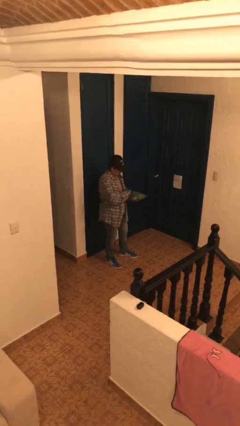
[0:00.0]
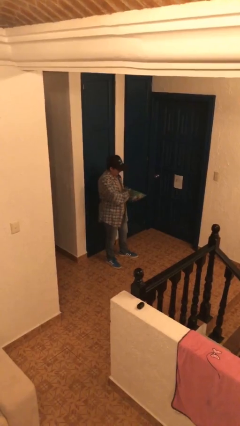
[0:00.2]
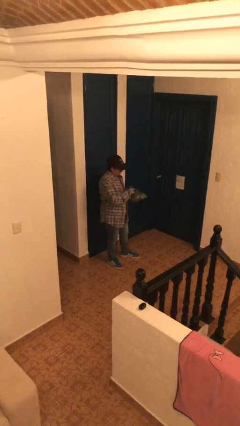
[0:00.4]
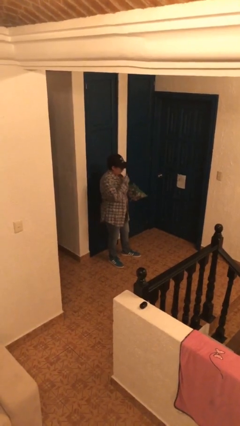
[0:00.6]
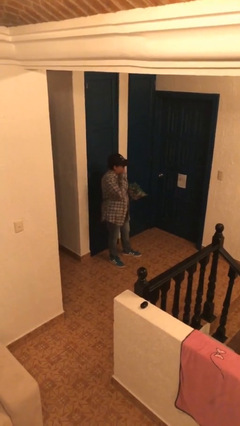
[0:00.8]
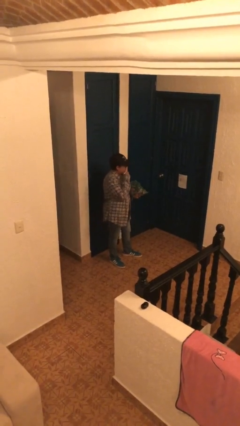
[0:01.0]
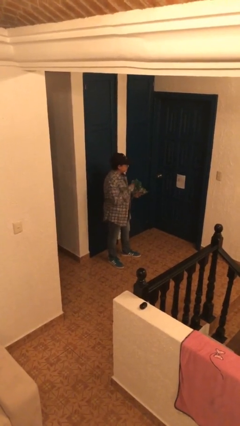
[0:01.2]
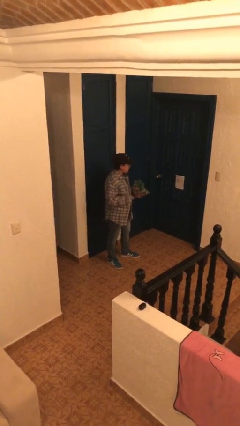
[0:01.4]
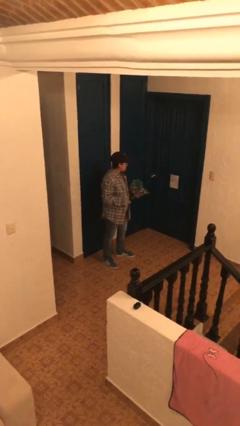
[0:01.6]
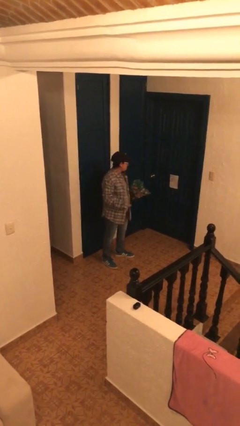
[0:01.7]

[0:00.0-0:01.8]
person eats snack from bag

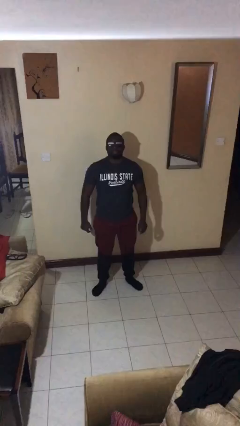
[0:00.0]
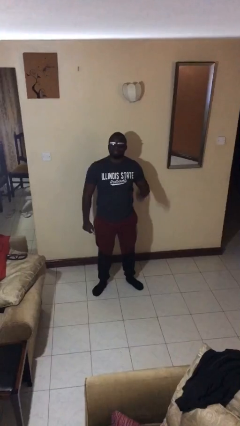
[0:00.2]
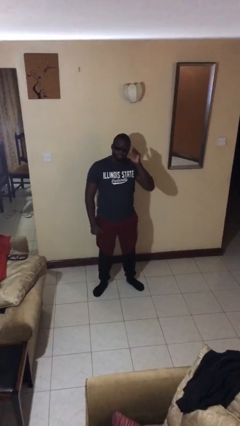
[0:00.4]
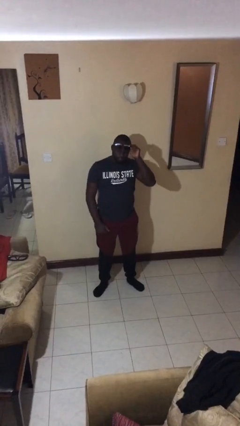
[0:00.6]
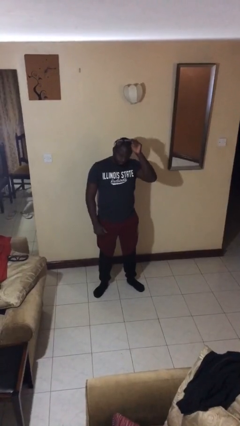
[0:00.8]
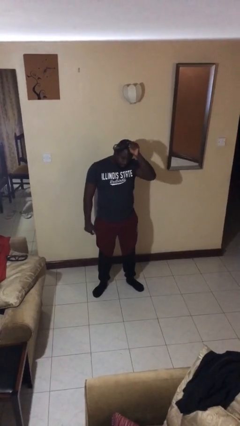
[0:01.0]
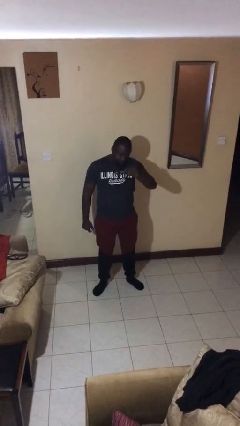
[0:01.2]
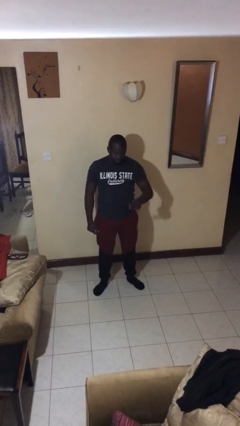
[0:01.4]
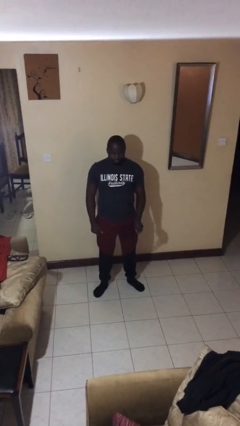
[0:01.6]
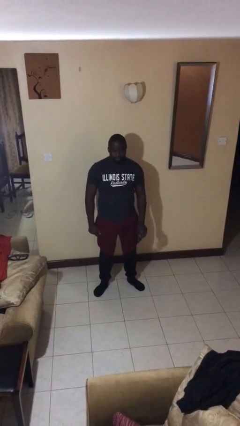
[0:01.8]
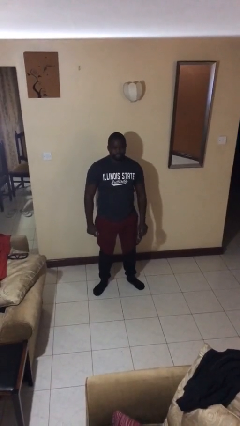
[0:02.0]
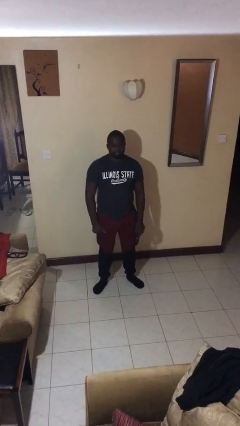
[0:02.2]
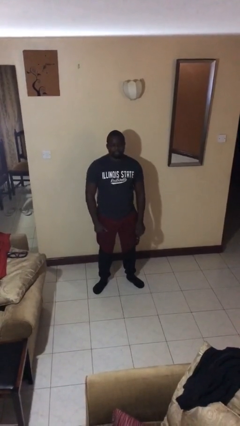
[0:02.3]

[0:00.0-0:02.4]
person takes off sunglasses

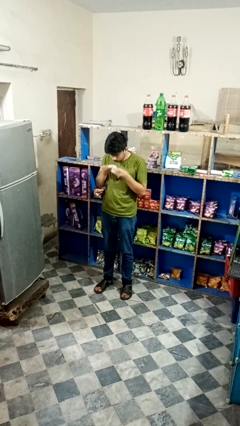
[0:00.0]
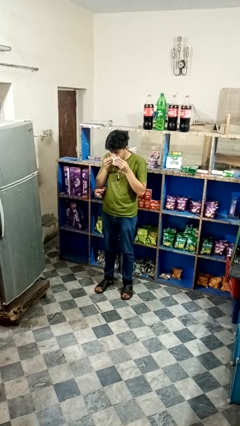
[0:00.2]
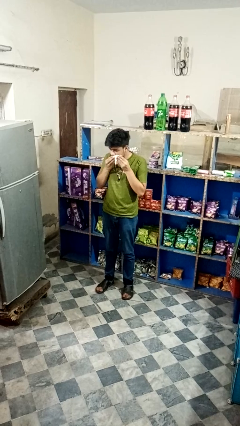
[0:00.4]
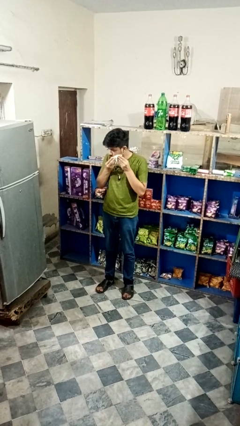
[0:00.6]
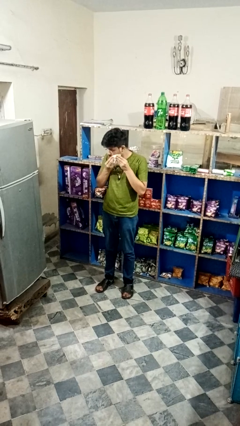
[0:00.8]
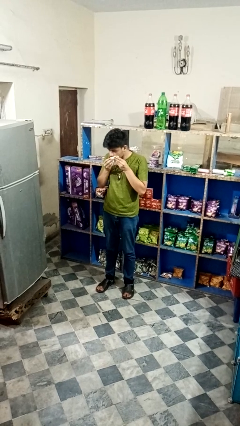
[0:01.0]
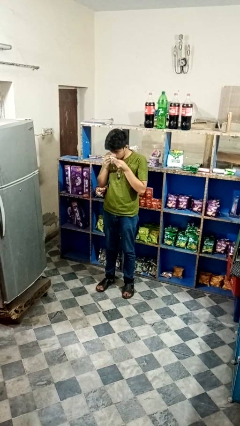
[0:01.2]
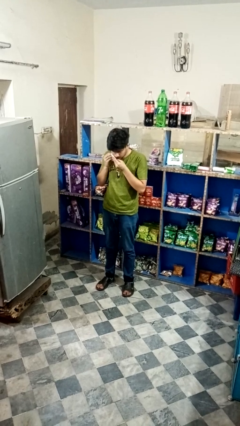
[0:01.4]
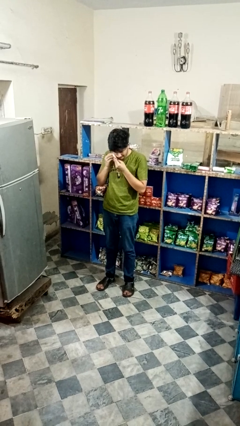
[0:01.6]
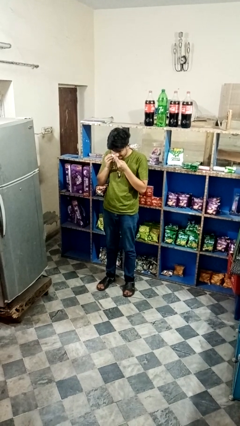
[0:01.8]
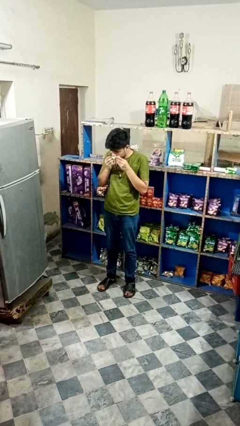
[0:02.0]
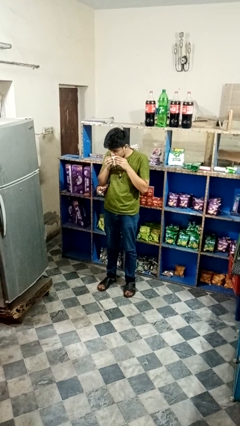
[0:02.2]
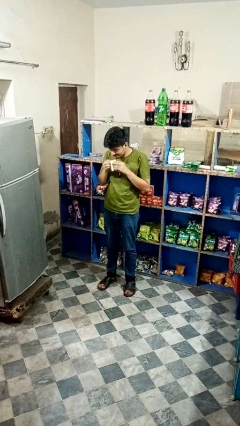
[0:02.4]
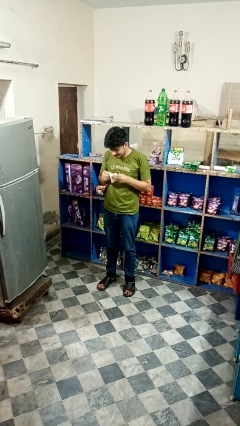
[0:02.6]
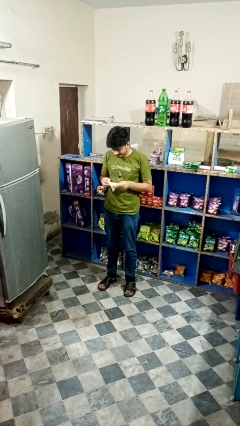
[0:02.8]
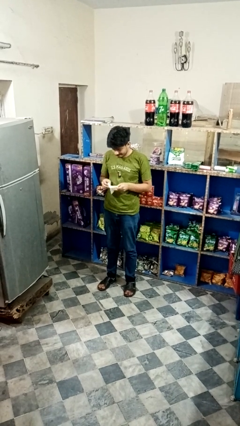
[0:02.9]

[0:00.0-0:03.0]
person wipes mouth with napkin

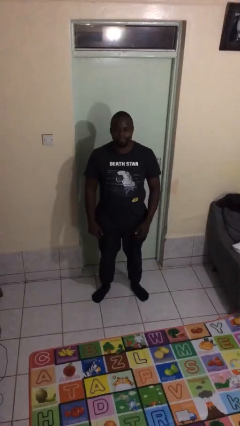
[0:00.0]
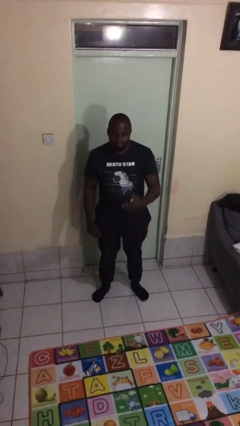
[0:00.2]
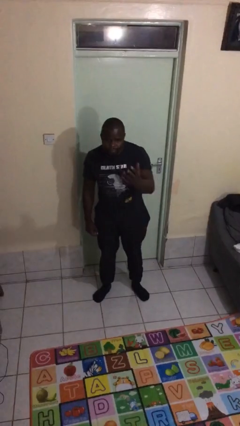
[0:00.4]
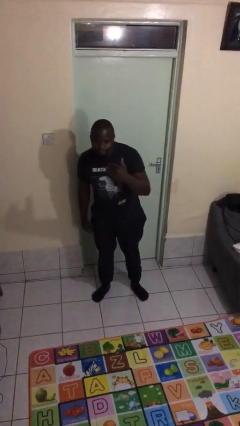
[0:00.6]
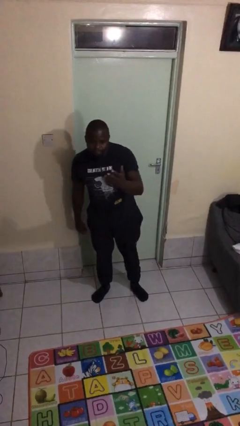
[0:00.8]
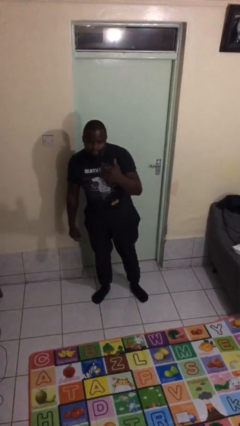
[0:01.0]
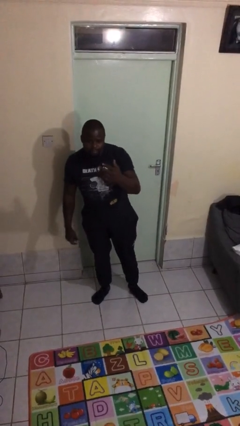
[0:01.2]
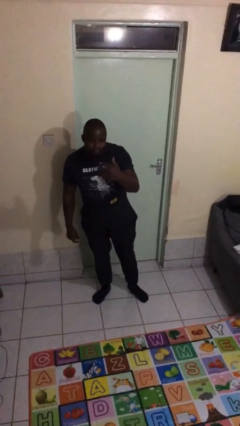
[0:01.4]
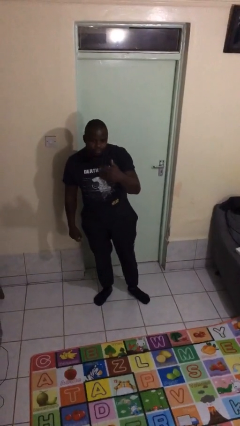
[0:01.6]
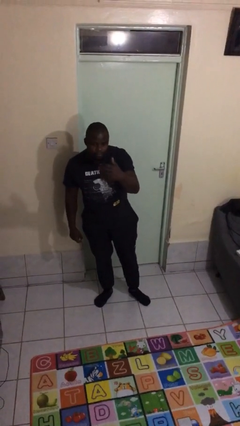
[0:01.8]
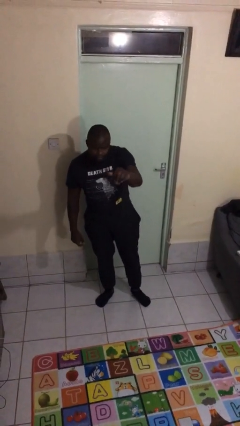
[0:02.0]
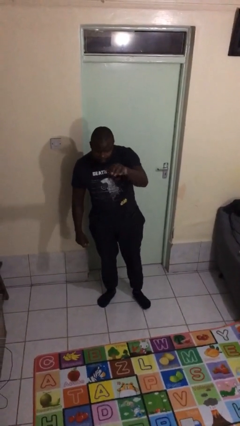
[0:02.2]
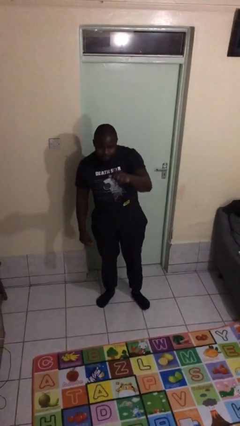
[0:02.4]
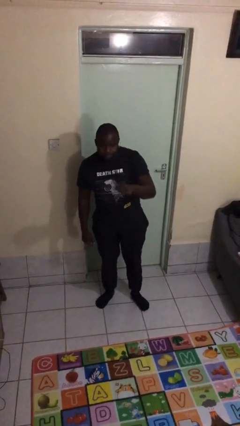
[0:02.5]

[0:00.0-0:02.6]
person gestures come here

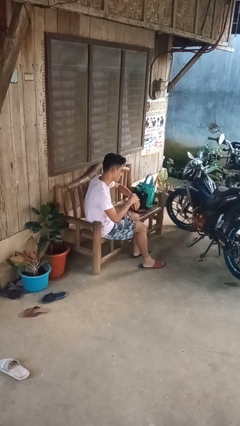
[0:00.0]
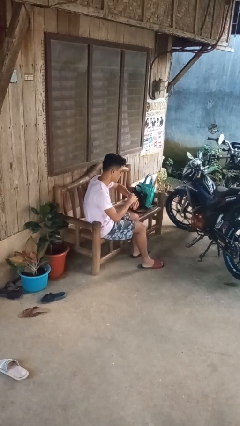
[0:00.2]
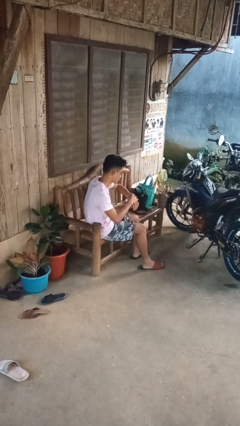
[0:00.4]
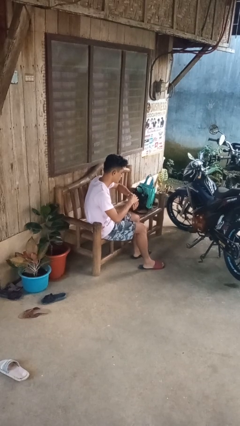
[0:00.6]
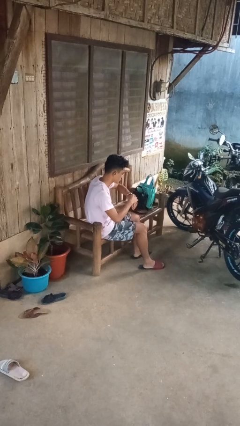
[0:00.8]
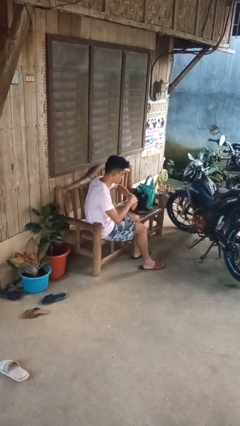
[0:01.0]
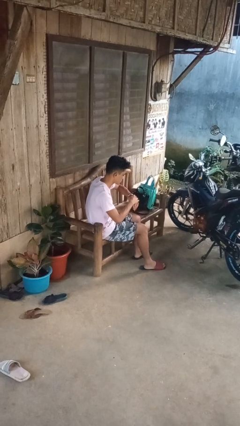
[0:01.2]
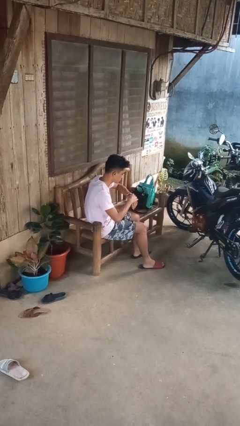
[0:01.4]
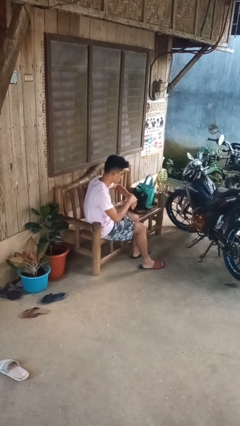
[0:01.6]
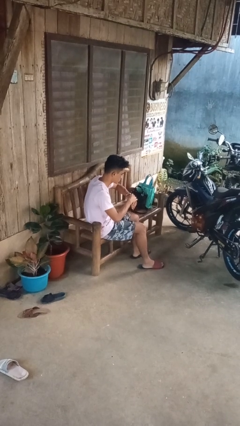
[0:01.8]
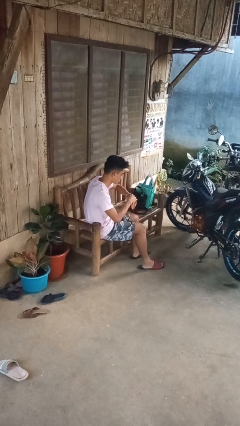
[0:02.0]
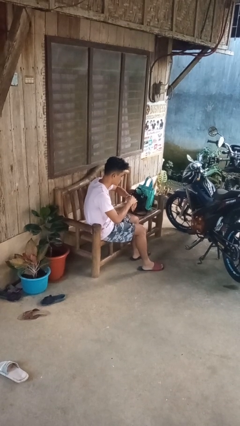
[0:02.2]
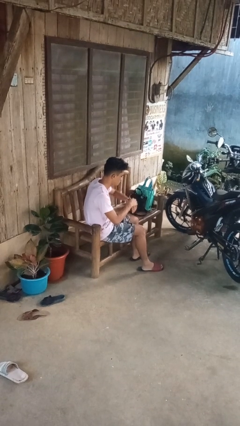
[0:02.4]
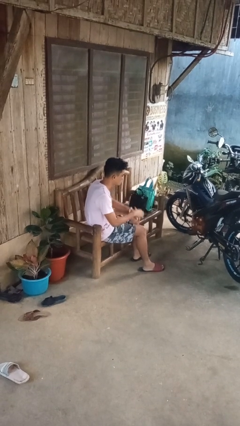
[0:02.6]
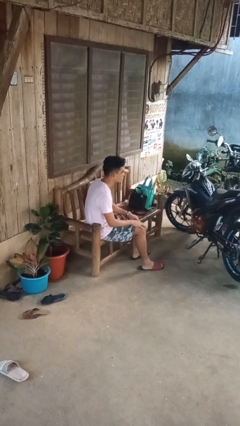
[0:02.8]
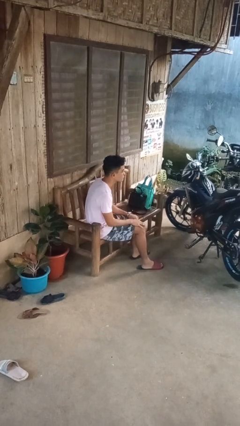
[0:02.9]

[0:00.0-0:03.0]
person looks at wristwatch

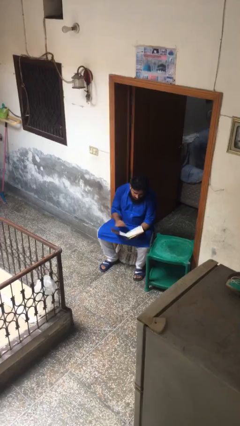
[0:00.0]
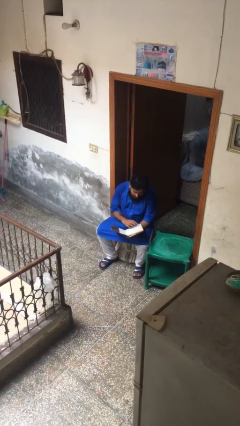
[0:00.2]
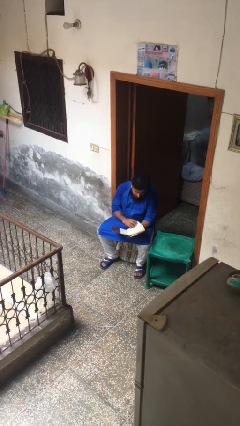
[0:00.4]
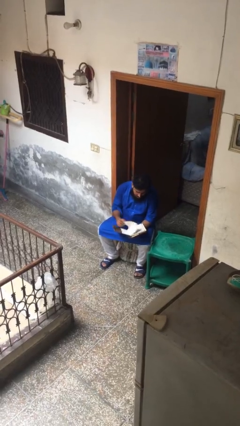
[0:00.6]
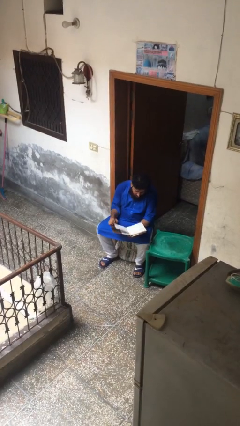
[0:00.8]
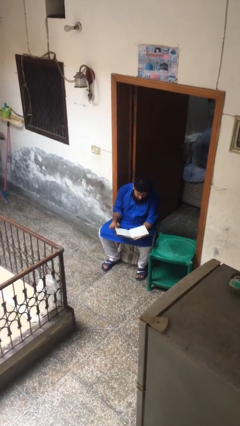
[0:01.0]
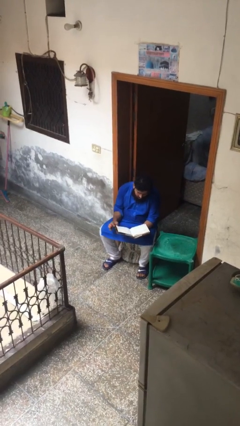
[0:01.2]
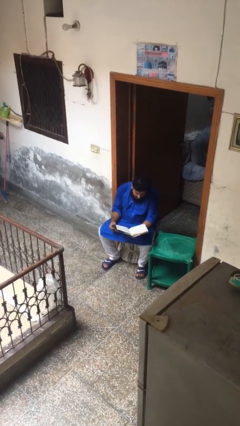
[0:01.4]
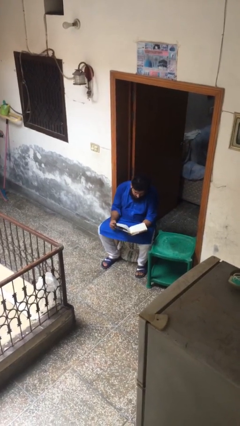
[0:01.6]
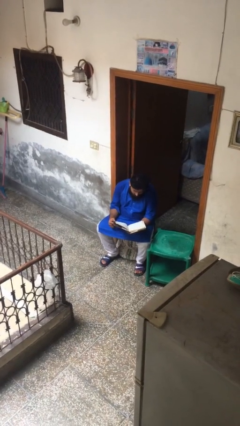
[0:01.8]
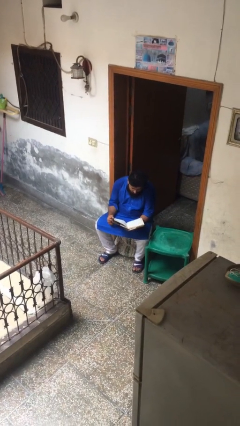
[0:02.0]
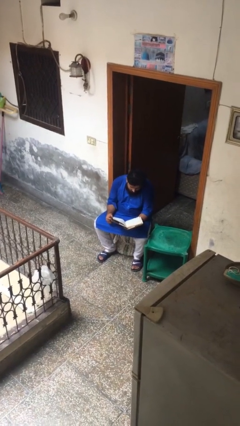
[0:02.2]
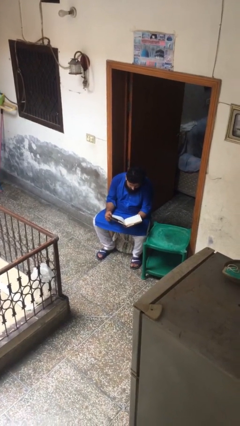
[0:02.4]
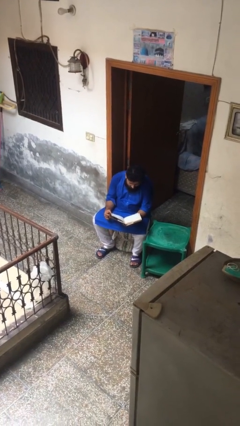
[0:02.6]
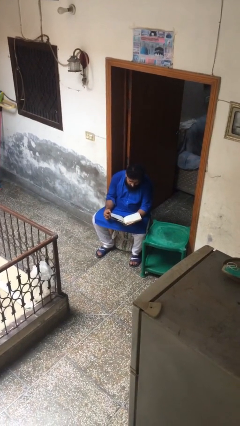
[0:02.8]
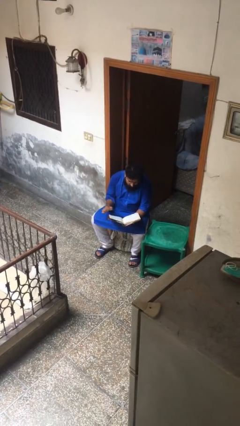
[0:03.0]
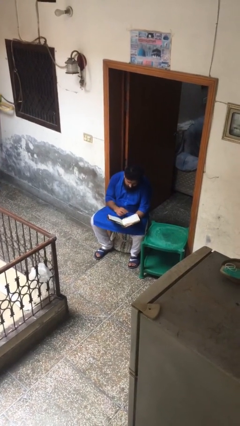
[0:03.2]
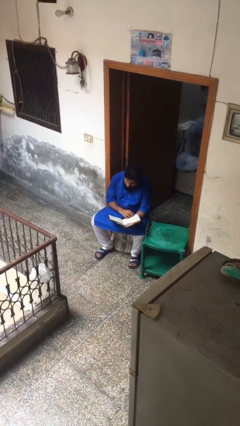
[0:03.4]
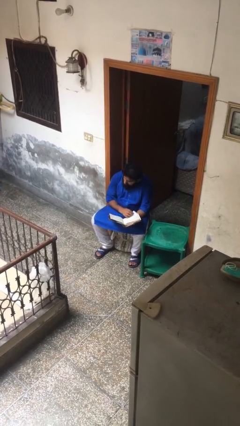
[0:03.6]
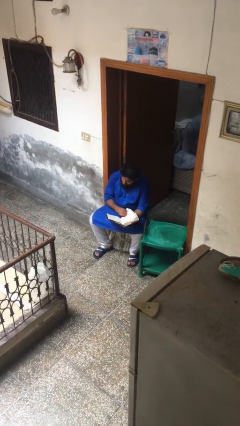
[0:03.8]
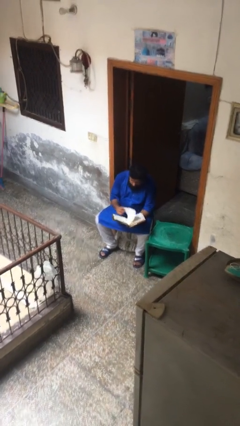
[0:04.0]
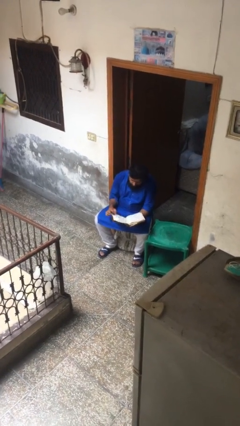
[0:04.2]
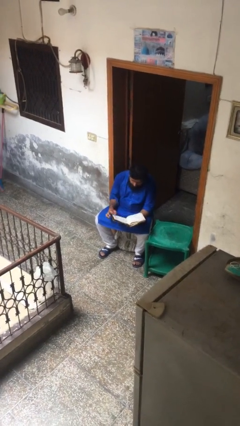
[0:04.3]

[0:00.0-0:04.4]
person reads document
